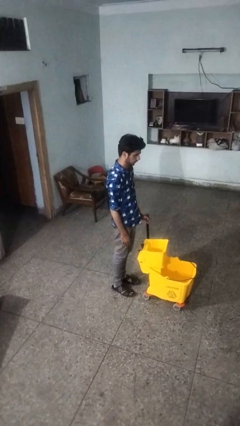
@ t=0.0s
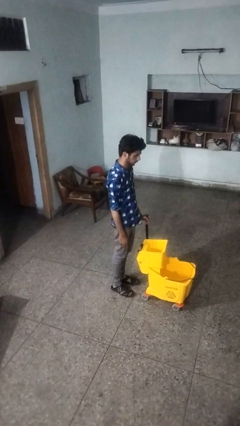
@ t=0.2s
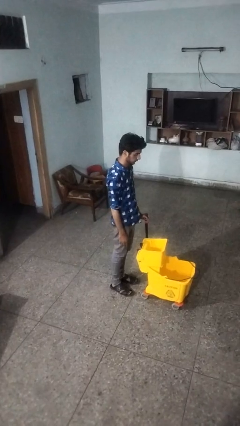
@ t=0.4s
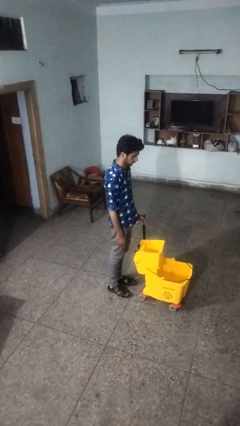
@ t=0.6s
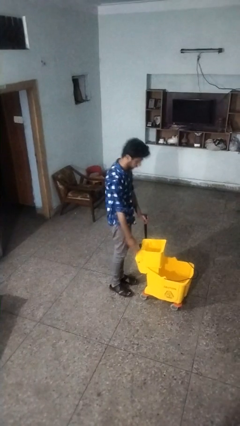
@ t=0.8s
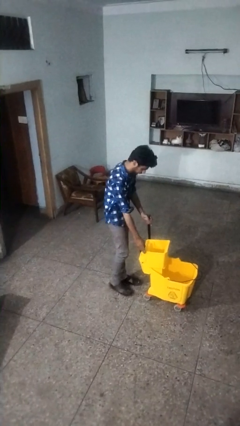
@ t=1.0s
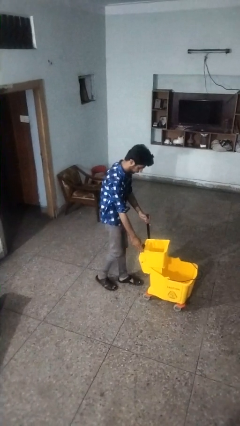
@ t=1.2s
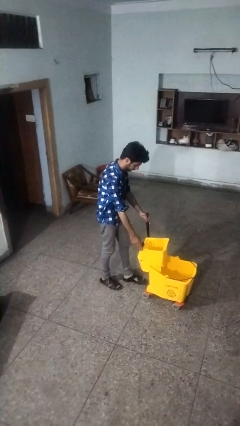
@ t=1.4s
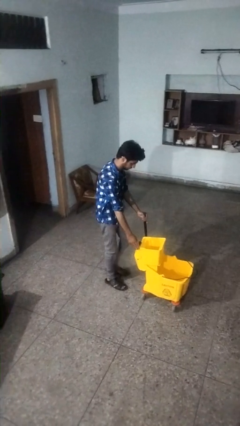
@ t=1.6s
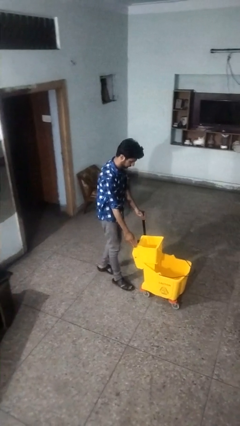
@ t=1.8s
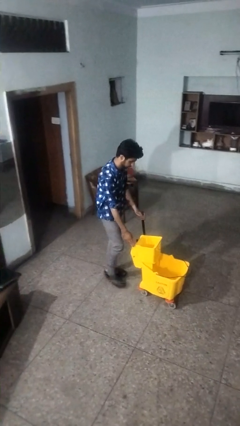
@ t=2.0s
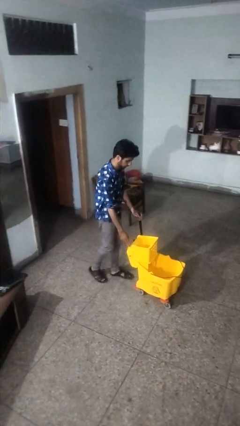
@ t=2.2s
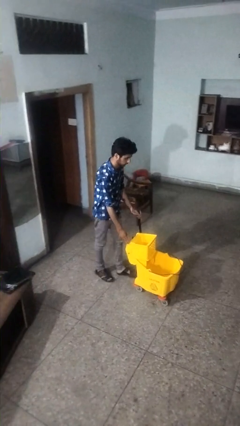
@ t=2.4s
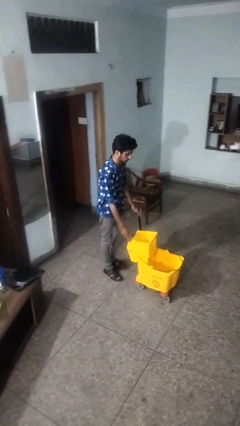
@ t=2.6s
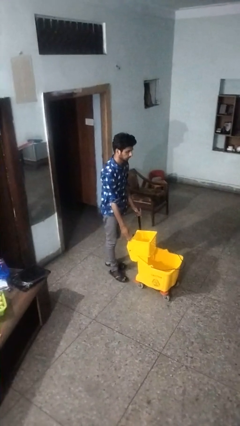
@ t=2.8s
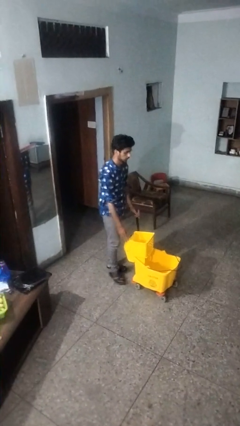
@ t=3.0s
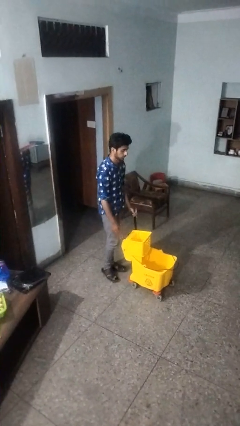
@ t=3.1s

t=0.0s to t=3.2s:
person pulls wheeled cart

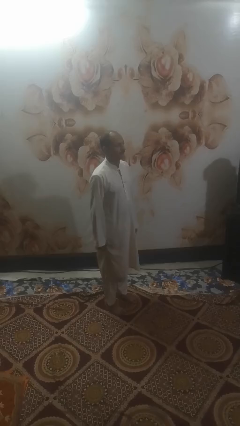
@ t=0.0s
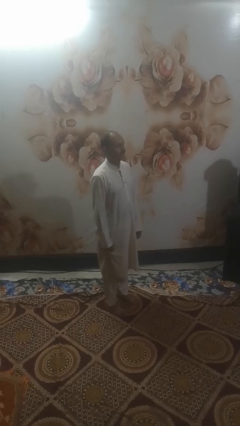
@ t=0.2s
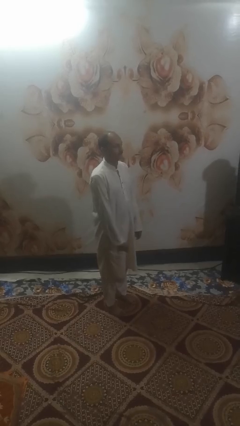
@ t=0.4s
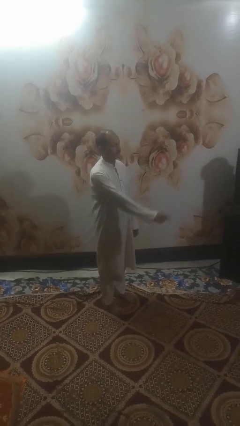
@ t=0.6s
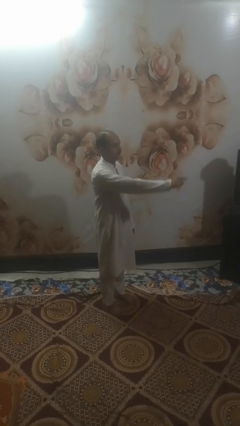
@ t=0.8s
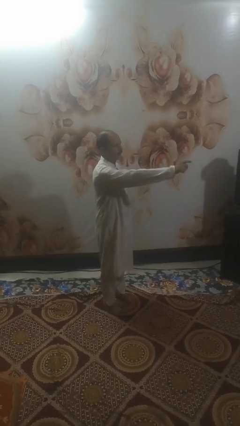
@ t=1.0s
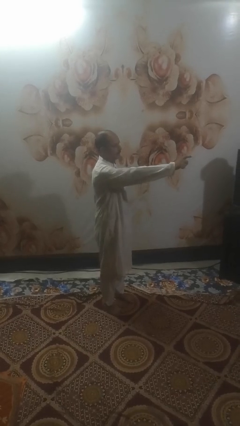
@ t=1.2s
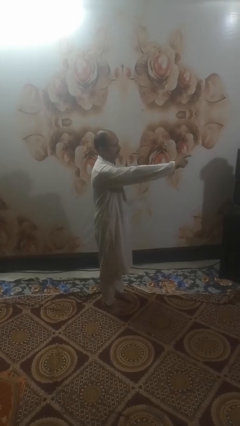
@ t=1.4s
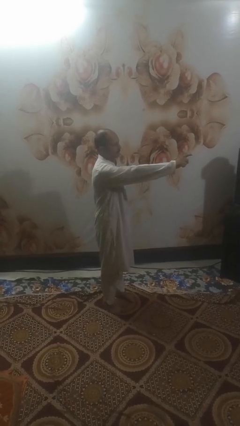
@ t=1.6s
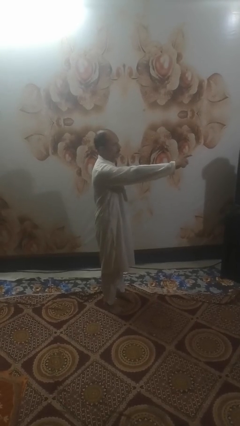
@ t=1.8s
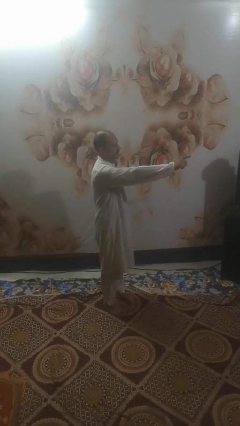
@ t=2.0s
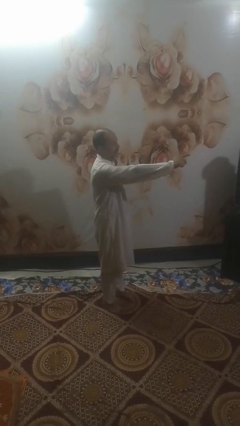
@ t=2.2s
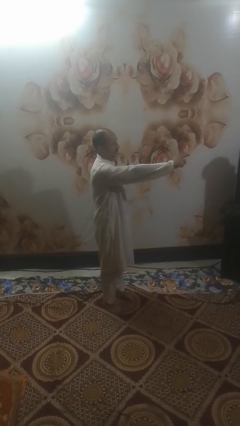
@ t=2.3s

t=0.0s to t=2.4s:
person points at person

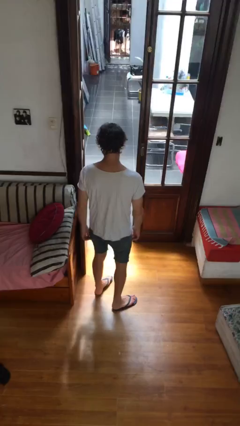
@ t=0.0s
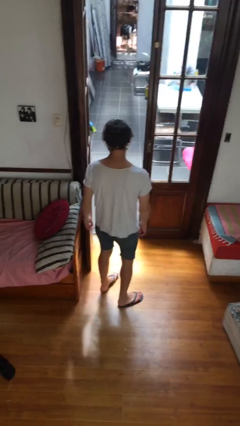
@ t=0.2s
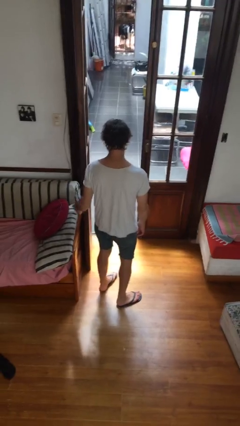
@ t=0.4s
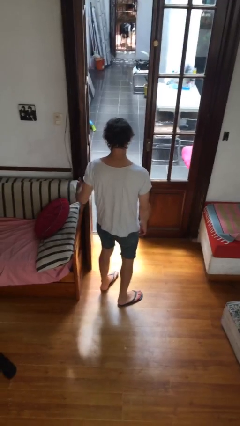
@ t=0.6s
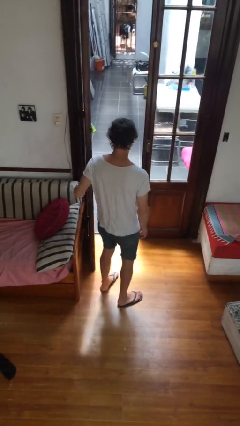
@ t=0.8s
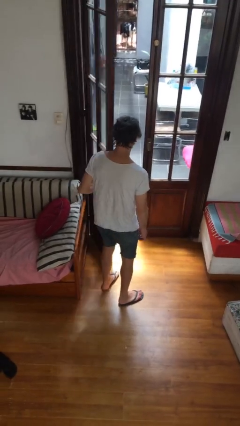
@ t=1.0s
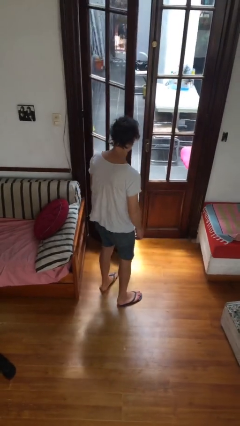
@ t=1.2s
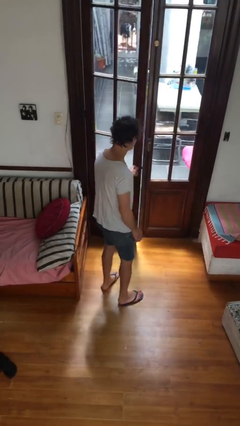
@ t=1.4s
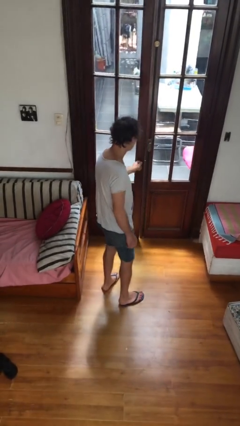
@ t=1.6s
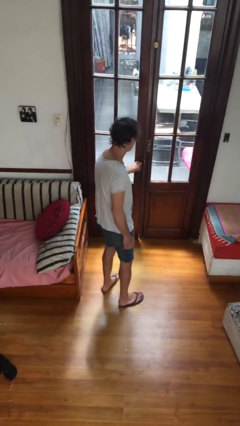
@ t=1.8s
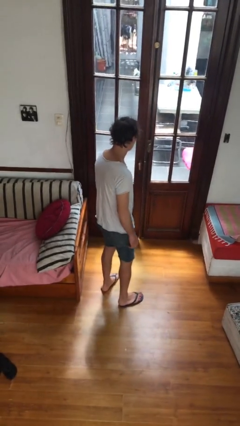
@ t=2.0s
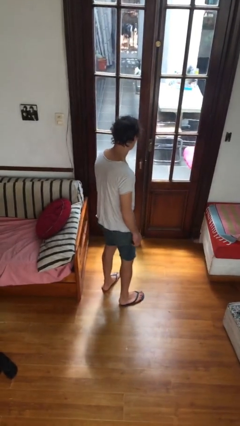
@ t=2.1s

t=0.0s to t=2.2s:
person closes facility door

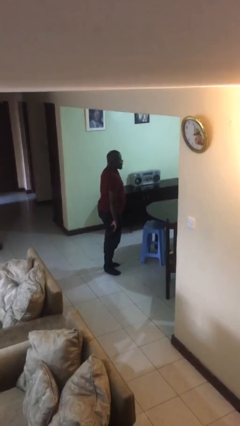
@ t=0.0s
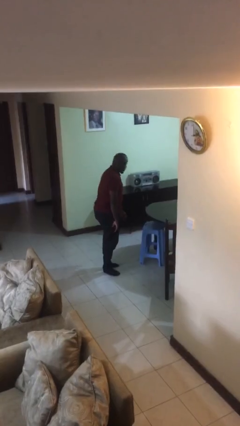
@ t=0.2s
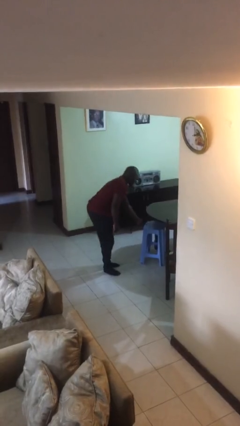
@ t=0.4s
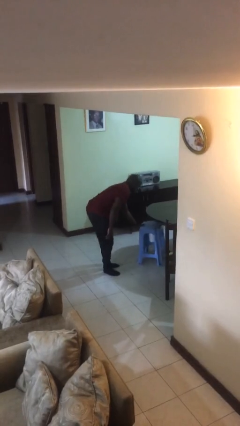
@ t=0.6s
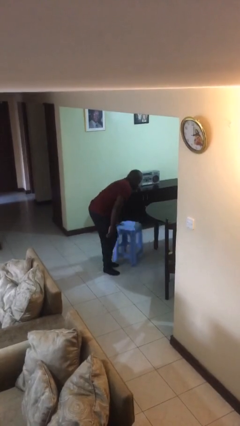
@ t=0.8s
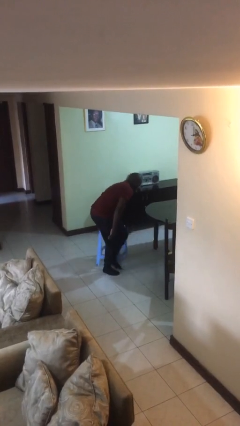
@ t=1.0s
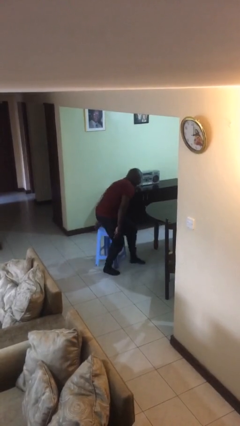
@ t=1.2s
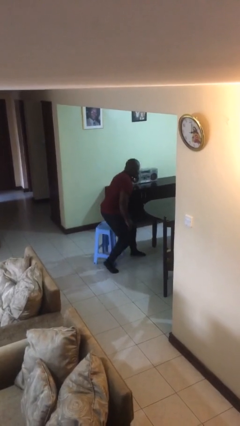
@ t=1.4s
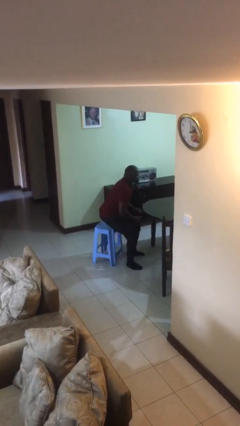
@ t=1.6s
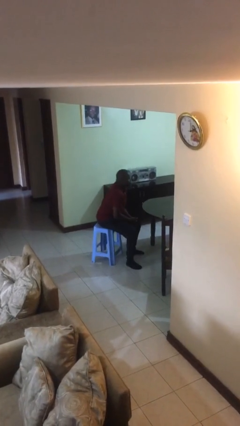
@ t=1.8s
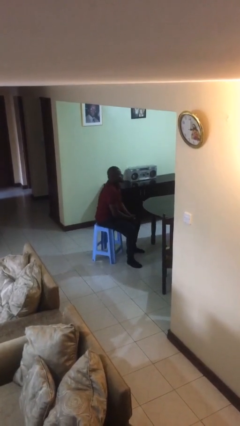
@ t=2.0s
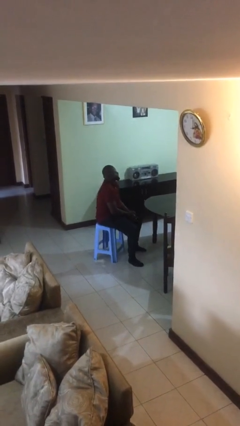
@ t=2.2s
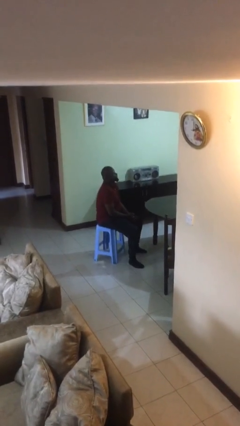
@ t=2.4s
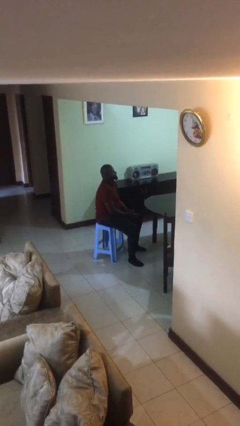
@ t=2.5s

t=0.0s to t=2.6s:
person sits down

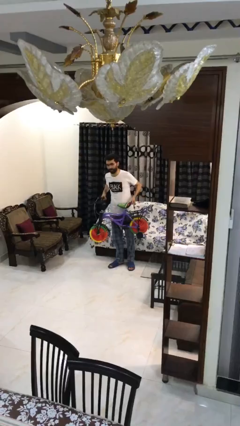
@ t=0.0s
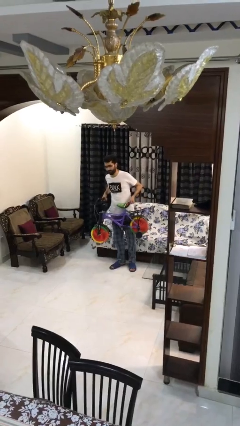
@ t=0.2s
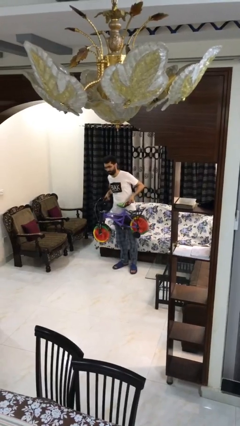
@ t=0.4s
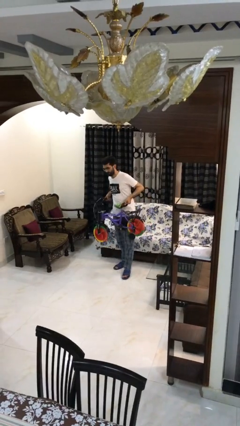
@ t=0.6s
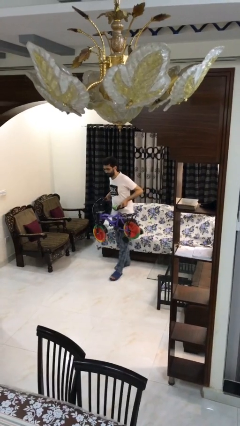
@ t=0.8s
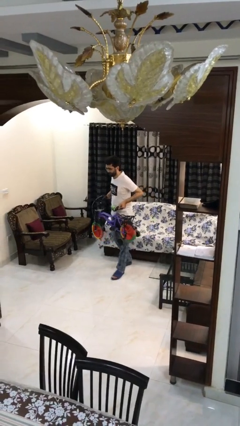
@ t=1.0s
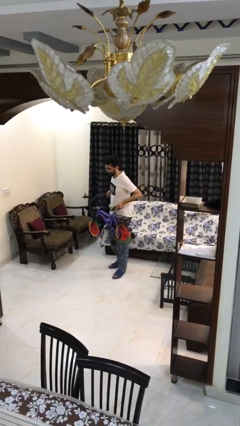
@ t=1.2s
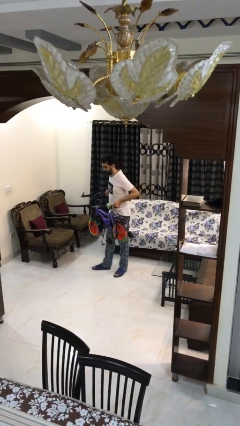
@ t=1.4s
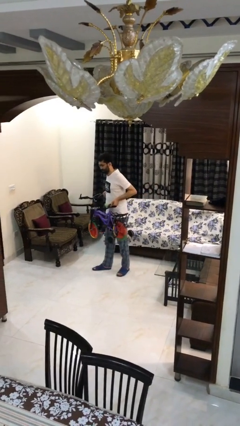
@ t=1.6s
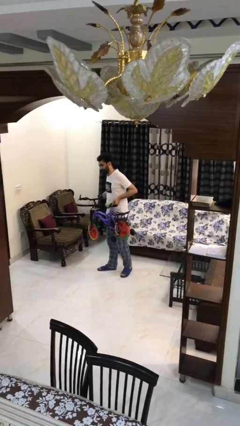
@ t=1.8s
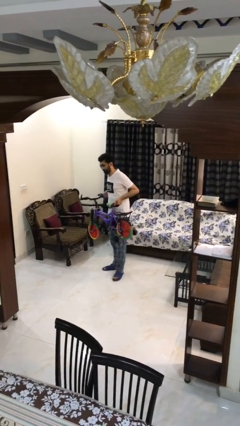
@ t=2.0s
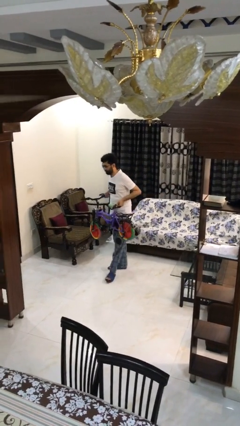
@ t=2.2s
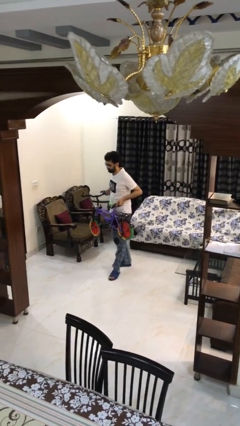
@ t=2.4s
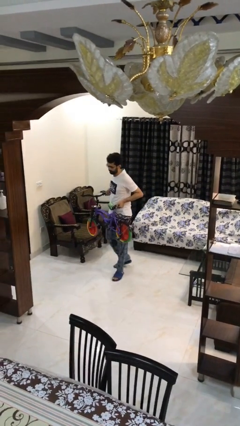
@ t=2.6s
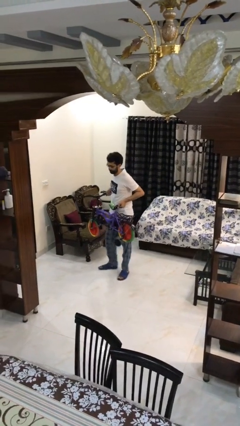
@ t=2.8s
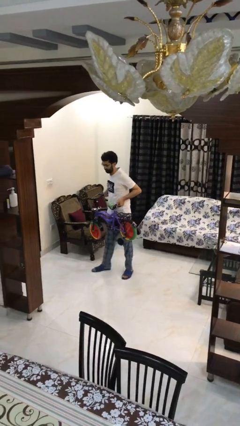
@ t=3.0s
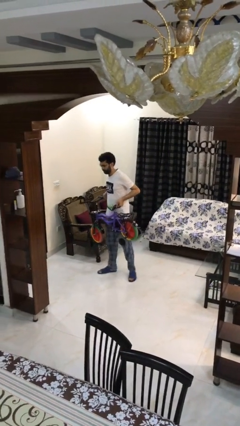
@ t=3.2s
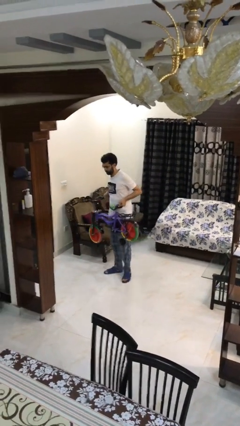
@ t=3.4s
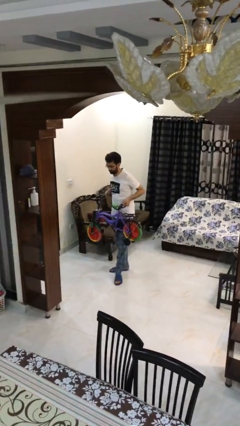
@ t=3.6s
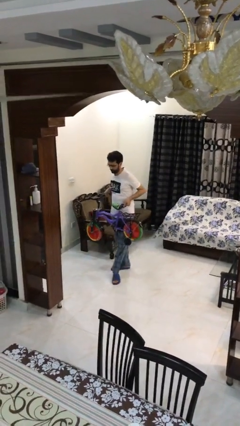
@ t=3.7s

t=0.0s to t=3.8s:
person carries heavy object

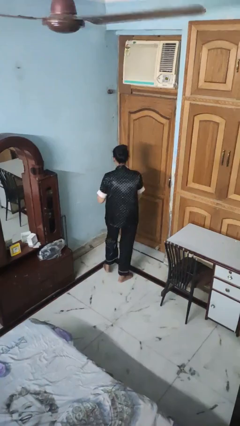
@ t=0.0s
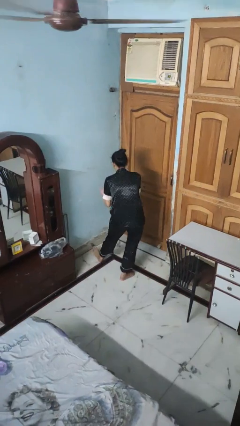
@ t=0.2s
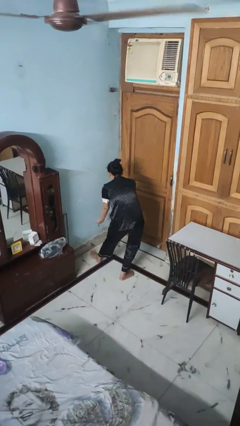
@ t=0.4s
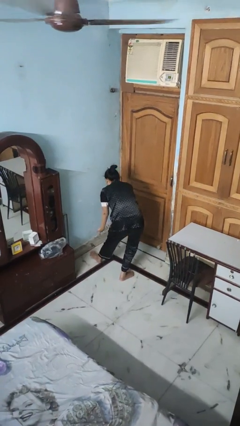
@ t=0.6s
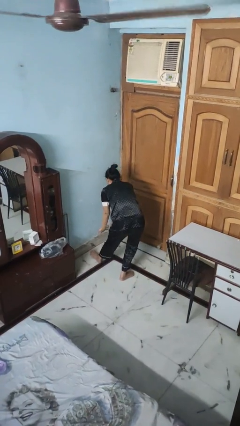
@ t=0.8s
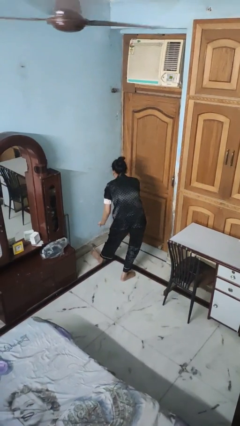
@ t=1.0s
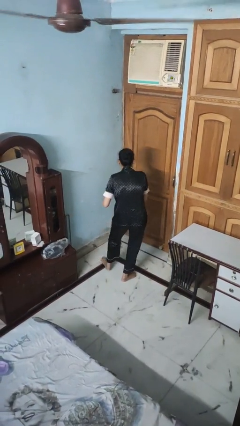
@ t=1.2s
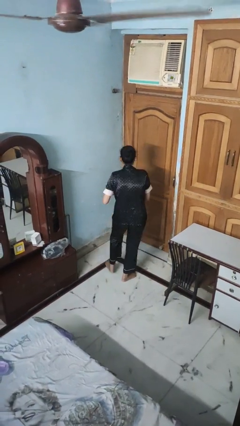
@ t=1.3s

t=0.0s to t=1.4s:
person dances in place

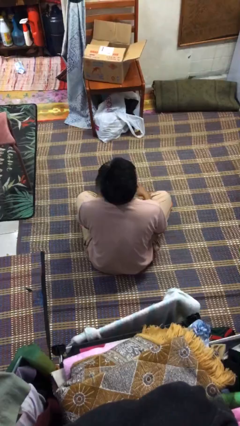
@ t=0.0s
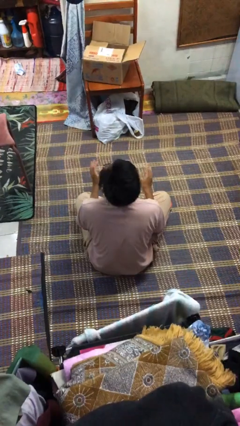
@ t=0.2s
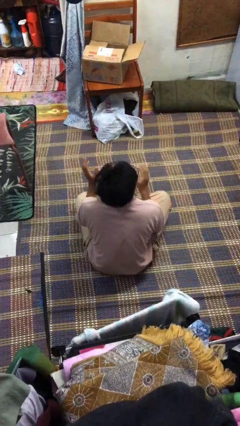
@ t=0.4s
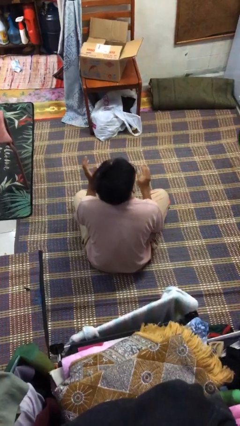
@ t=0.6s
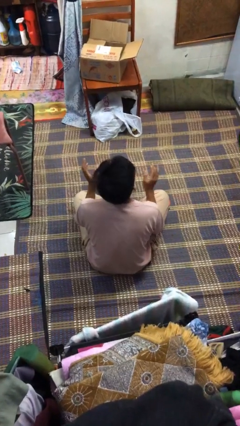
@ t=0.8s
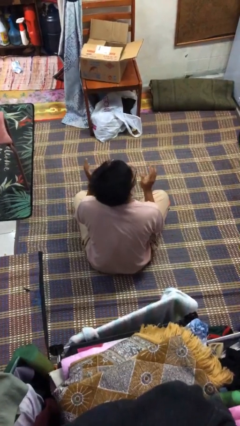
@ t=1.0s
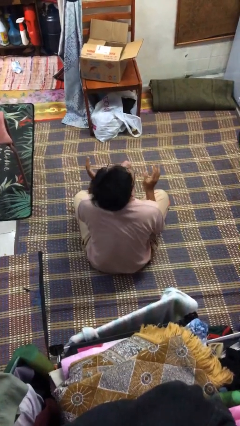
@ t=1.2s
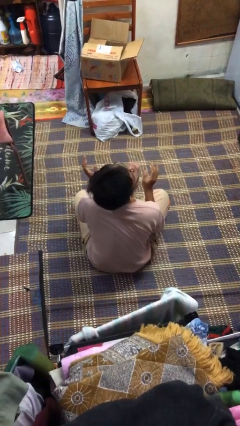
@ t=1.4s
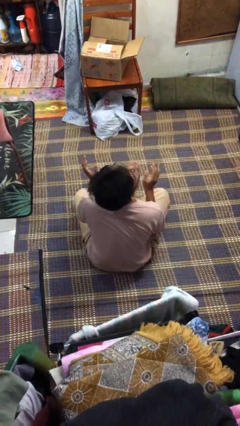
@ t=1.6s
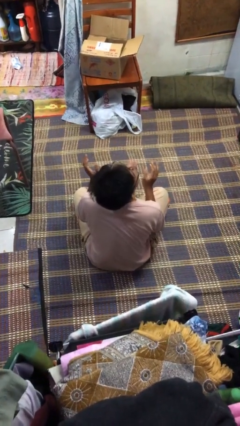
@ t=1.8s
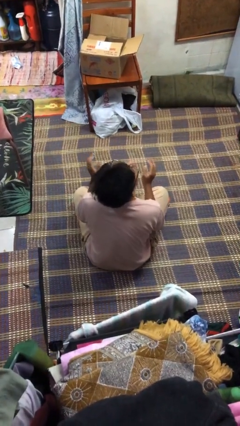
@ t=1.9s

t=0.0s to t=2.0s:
person sticks out tongue
